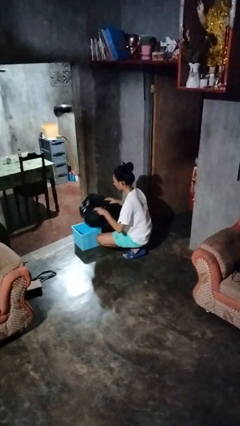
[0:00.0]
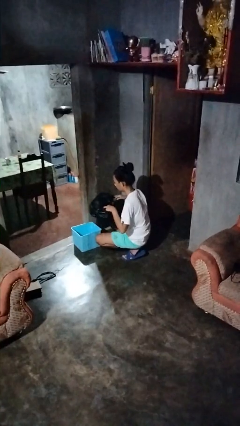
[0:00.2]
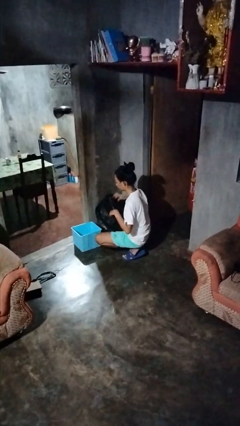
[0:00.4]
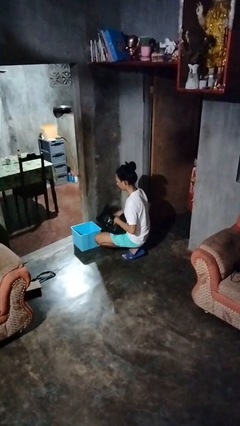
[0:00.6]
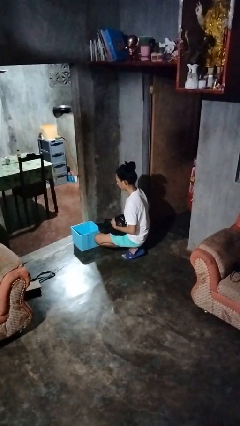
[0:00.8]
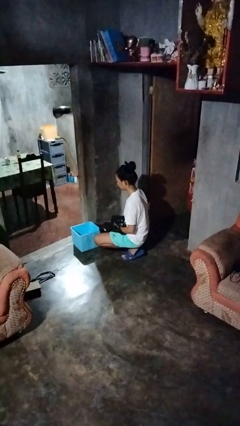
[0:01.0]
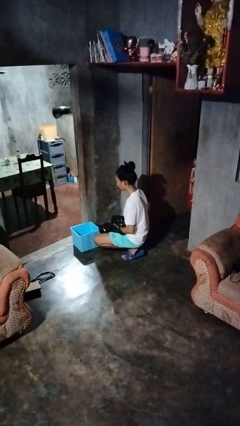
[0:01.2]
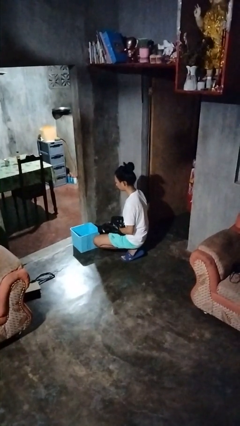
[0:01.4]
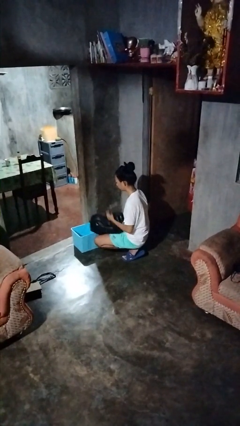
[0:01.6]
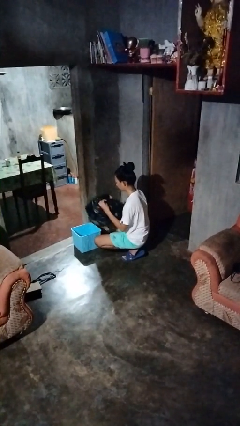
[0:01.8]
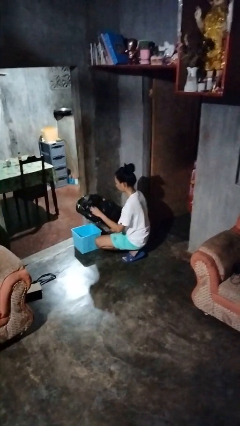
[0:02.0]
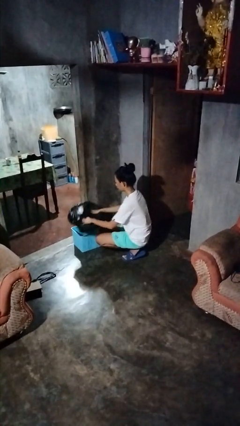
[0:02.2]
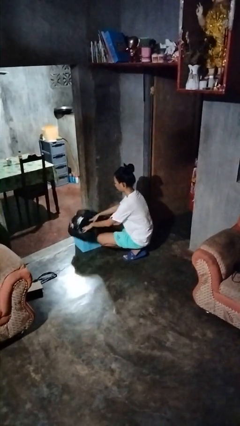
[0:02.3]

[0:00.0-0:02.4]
person removes trashbag from trashcan

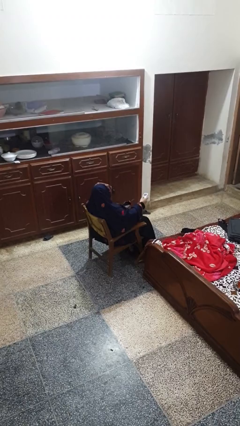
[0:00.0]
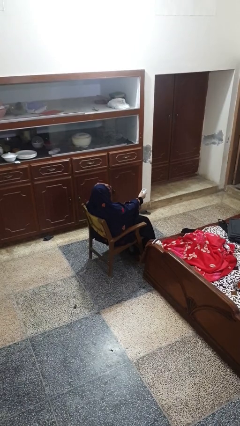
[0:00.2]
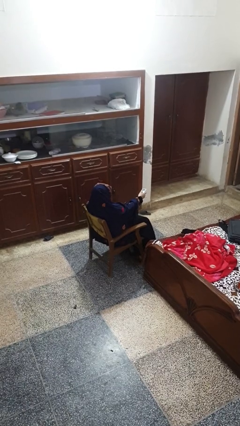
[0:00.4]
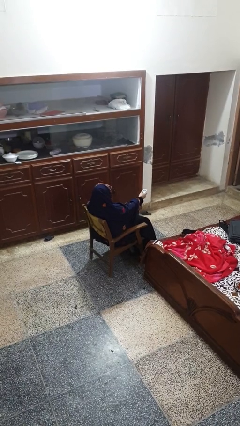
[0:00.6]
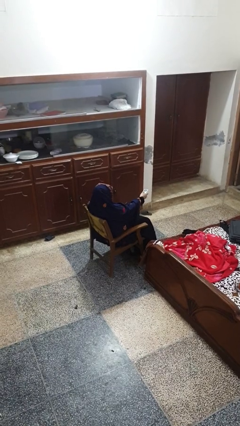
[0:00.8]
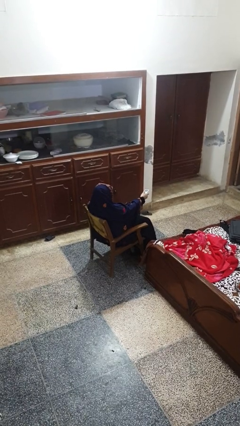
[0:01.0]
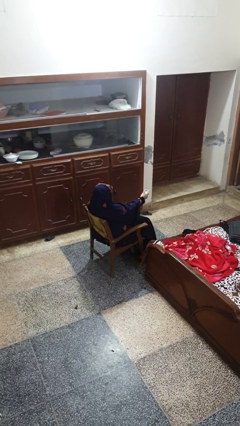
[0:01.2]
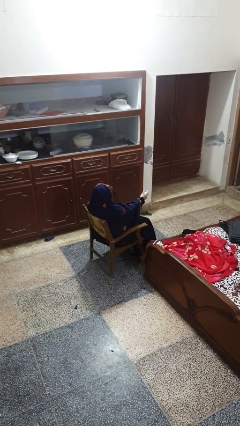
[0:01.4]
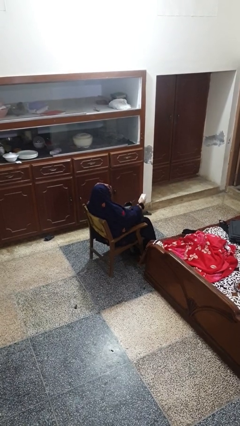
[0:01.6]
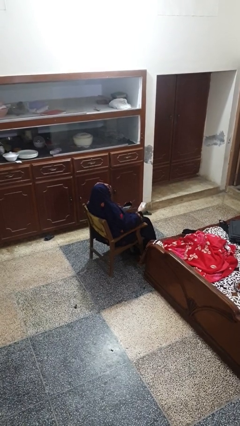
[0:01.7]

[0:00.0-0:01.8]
person uses television remote

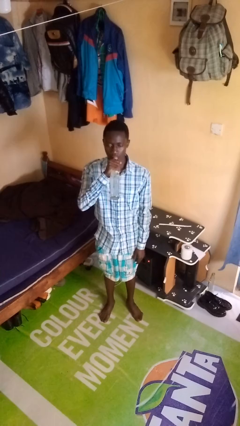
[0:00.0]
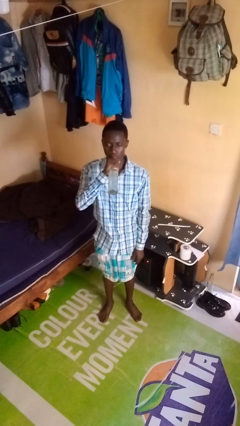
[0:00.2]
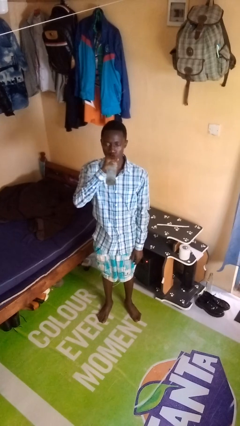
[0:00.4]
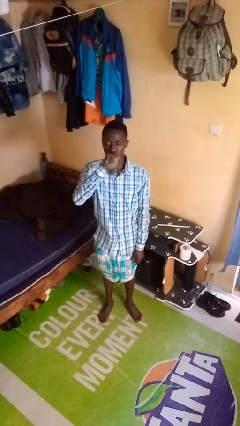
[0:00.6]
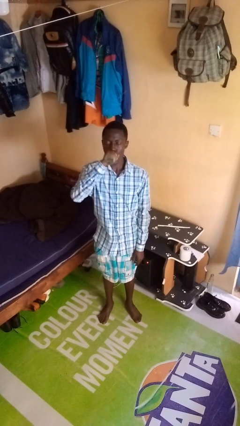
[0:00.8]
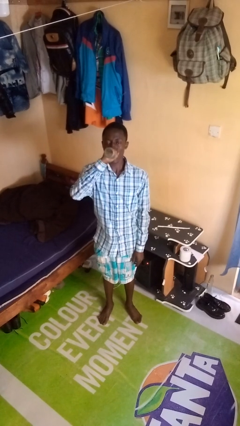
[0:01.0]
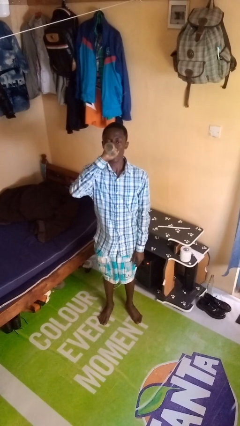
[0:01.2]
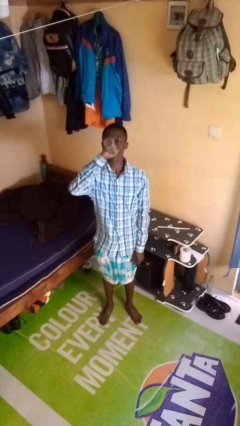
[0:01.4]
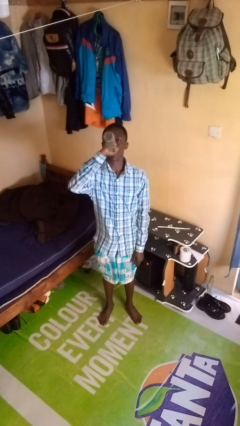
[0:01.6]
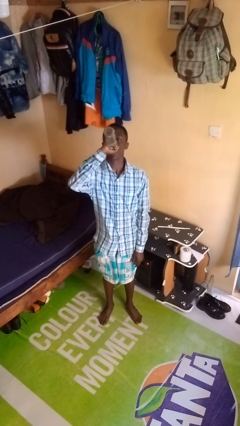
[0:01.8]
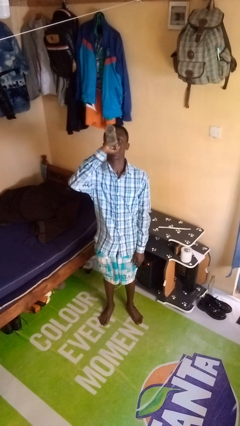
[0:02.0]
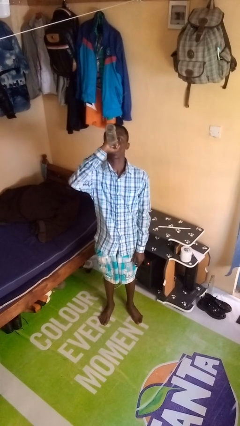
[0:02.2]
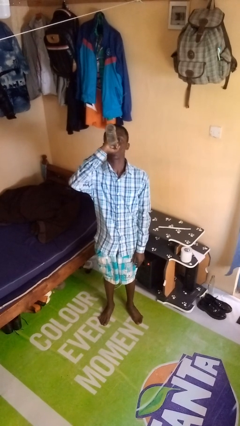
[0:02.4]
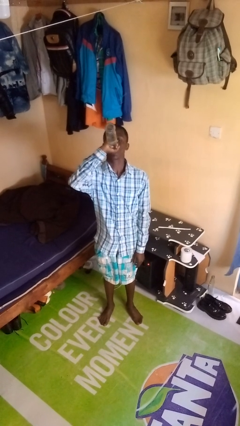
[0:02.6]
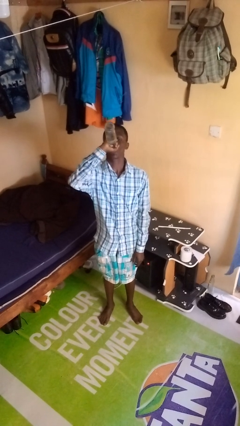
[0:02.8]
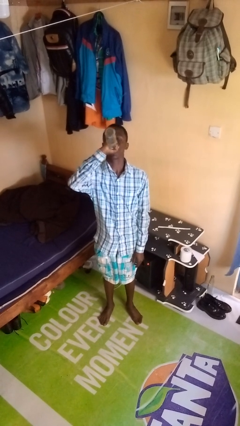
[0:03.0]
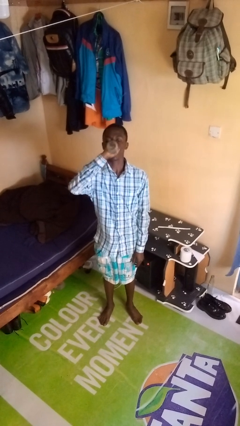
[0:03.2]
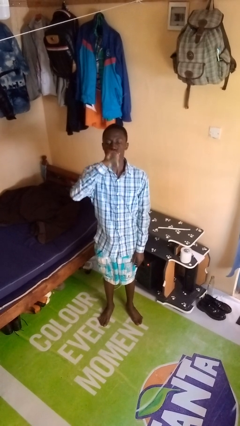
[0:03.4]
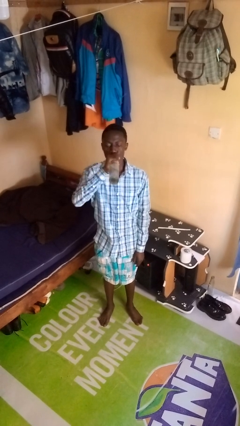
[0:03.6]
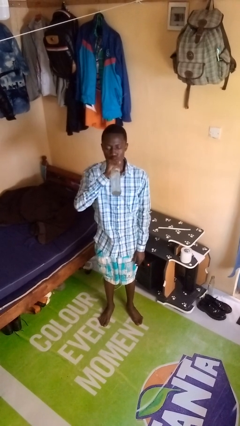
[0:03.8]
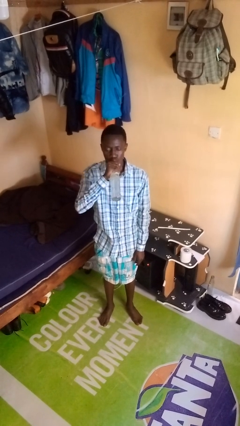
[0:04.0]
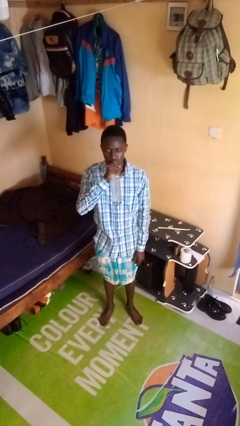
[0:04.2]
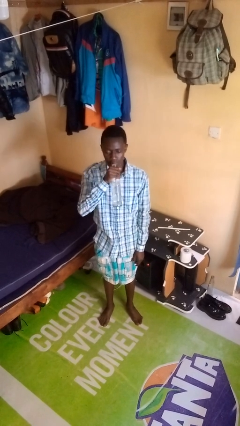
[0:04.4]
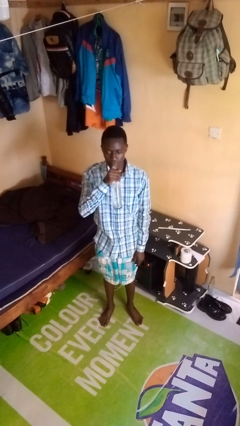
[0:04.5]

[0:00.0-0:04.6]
person drinks from bottle

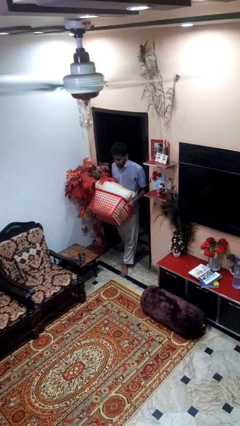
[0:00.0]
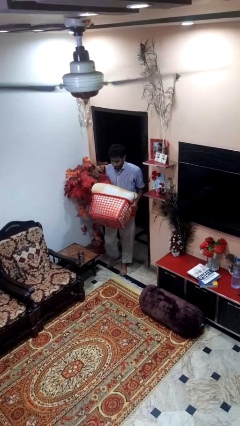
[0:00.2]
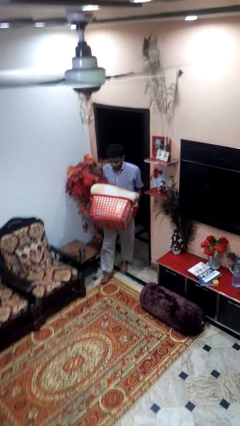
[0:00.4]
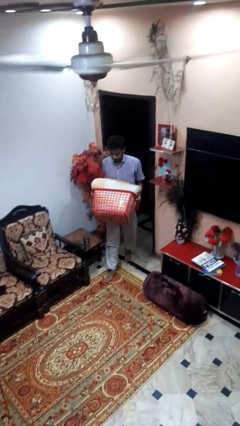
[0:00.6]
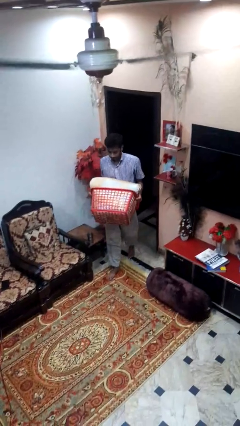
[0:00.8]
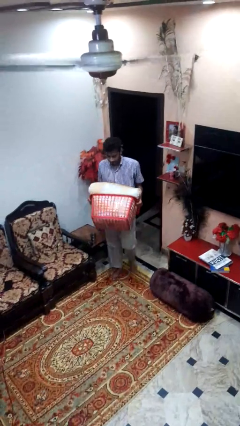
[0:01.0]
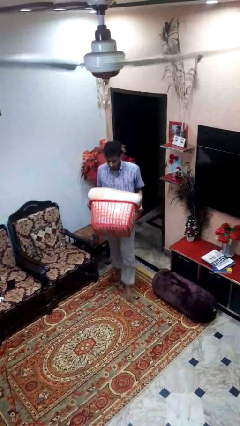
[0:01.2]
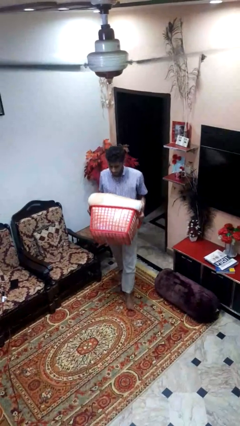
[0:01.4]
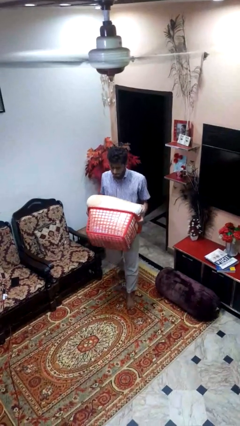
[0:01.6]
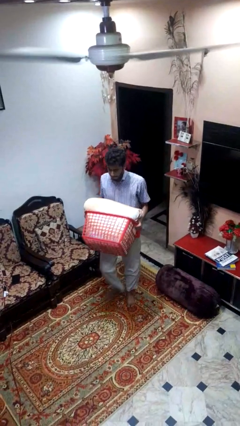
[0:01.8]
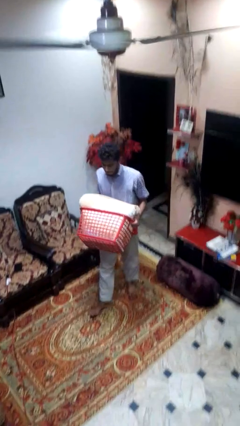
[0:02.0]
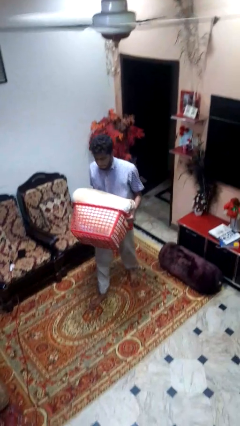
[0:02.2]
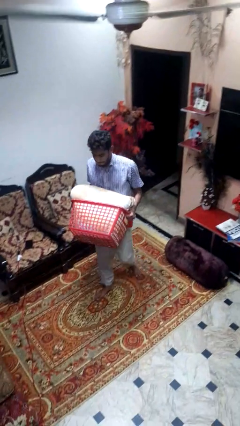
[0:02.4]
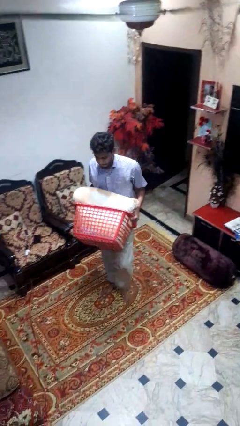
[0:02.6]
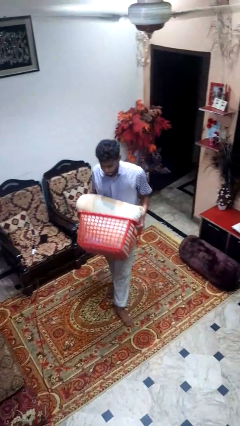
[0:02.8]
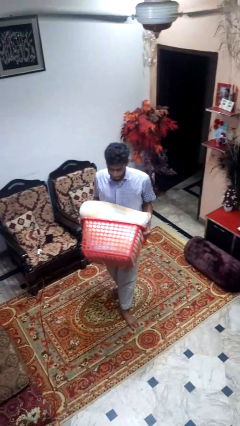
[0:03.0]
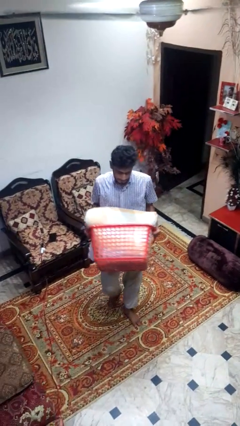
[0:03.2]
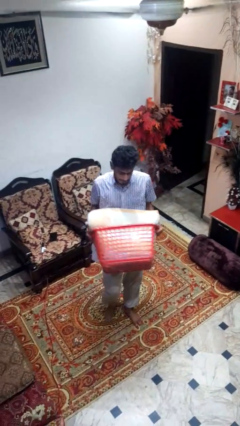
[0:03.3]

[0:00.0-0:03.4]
person carries laundry basket

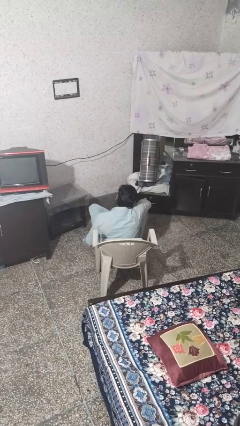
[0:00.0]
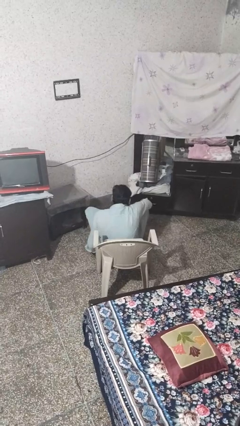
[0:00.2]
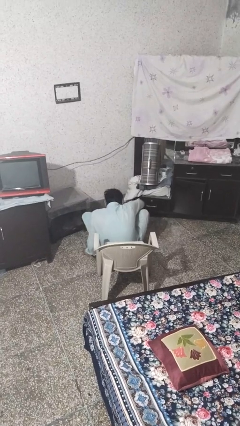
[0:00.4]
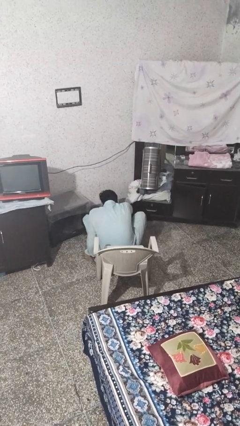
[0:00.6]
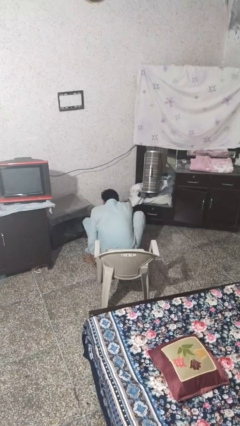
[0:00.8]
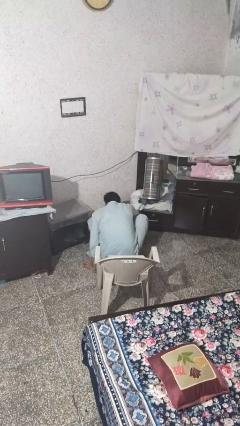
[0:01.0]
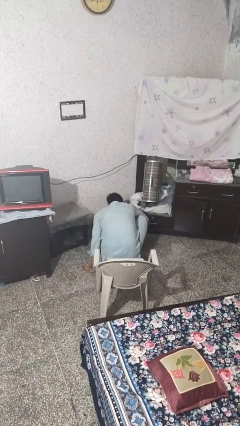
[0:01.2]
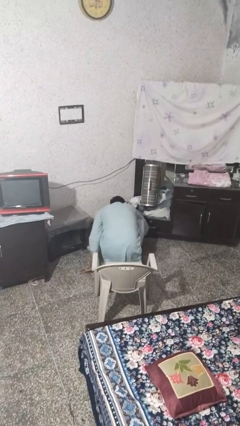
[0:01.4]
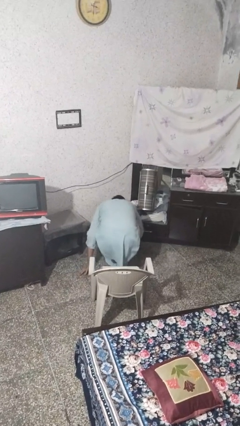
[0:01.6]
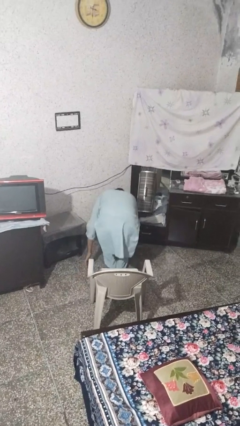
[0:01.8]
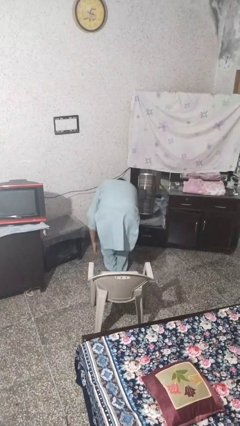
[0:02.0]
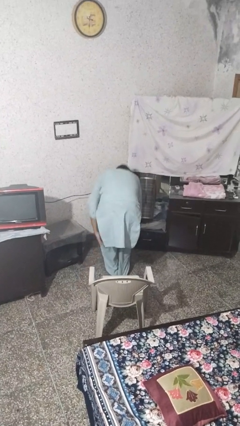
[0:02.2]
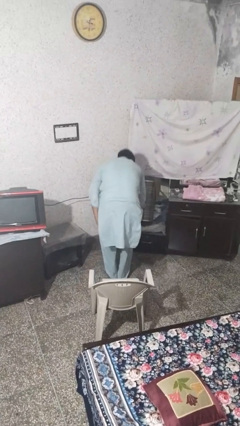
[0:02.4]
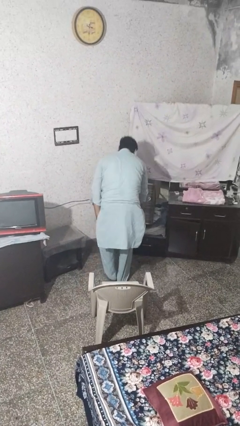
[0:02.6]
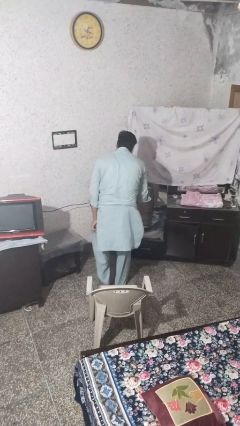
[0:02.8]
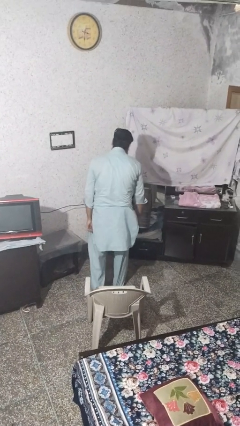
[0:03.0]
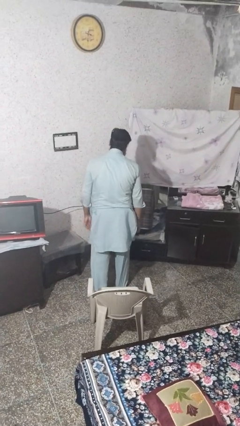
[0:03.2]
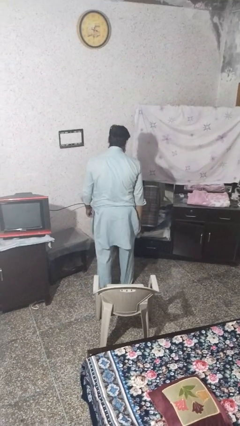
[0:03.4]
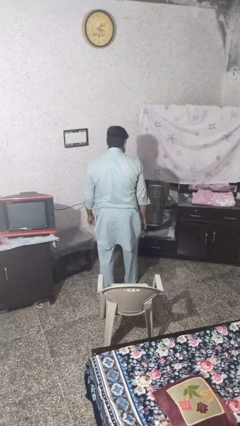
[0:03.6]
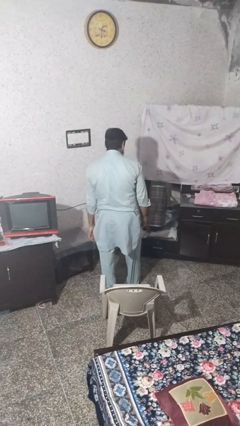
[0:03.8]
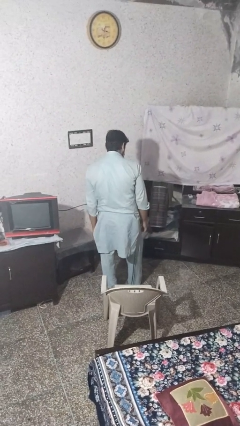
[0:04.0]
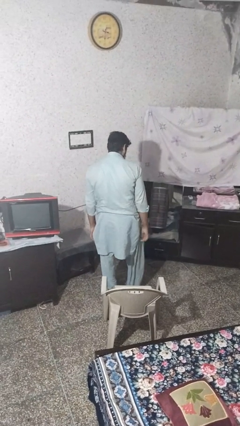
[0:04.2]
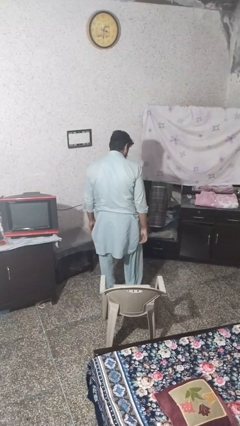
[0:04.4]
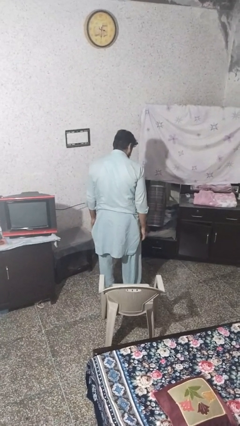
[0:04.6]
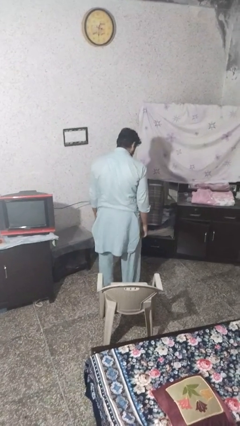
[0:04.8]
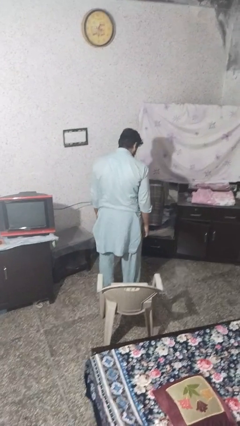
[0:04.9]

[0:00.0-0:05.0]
person stands up from floor
